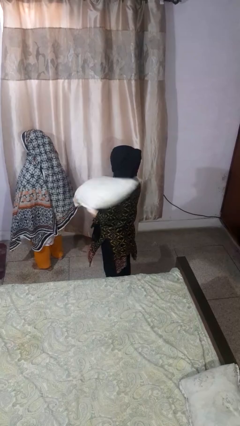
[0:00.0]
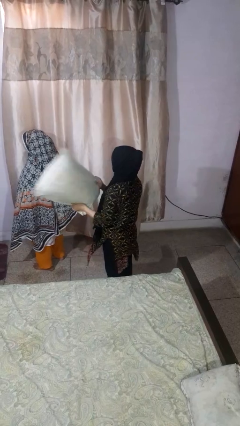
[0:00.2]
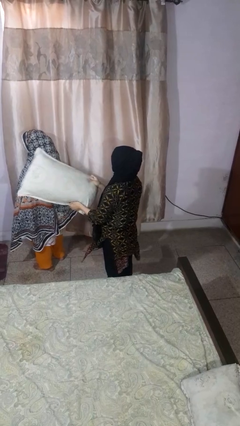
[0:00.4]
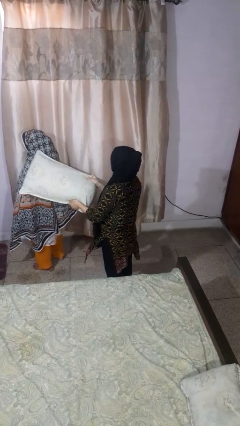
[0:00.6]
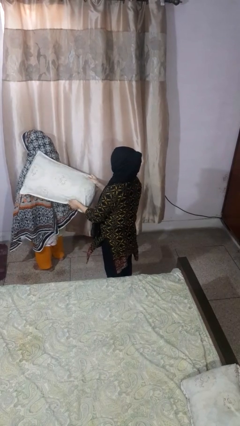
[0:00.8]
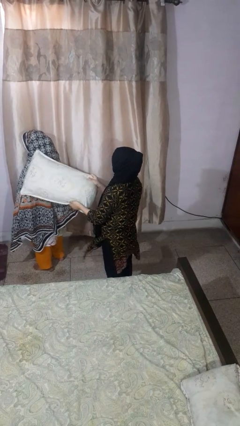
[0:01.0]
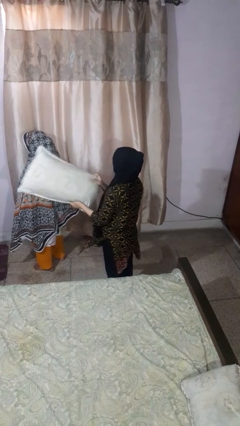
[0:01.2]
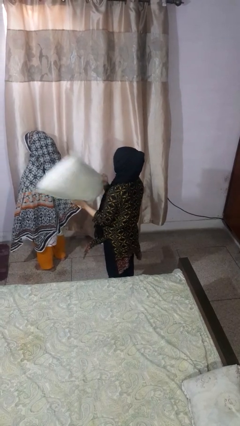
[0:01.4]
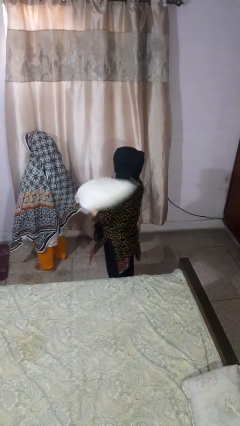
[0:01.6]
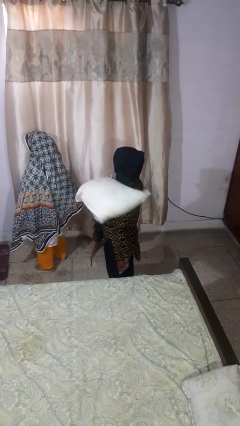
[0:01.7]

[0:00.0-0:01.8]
person hits person with pillow

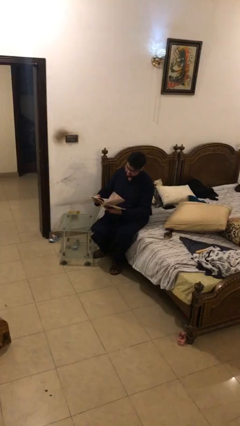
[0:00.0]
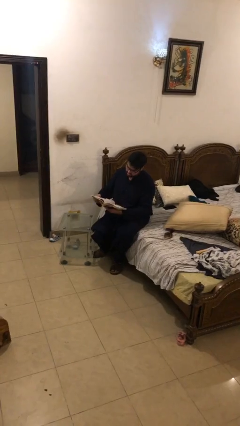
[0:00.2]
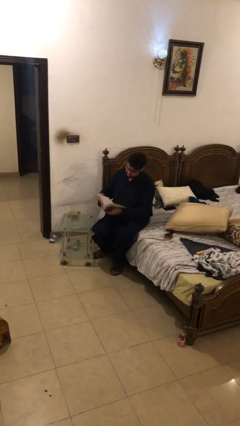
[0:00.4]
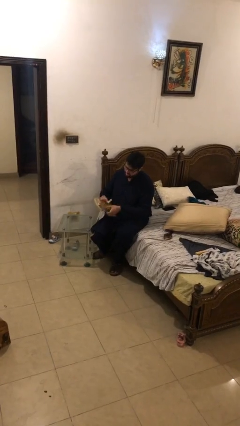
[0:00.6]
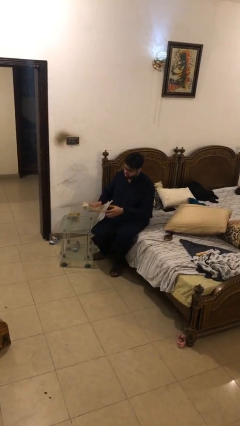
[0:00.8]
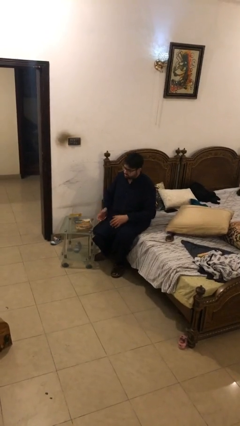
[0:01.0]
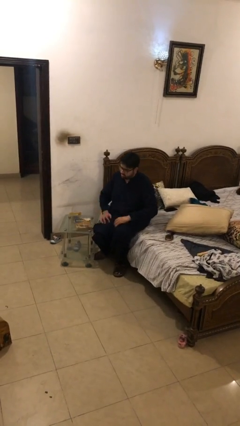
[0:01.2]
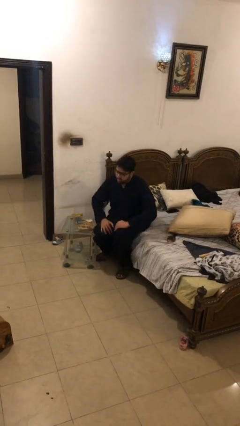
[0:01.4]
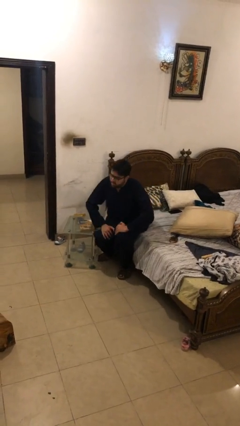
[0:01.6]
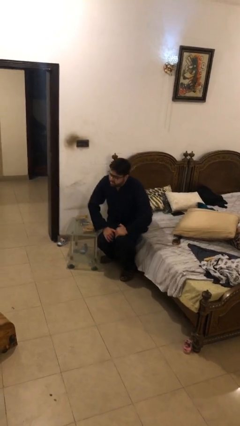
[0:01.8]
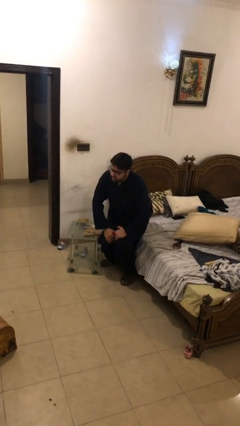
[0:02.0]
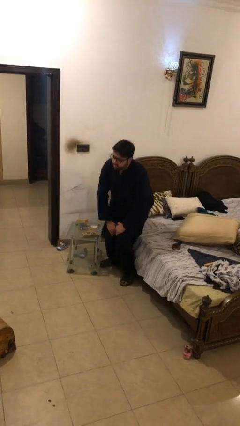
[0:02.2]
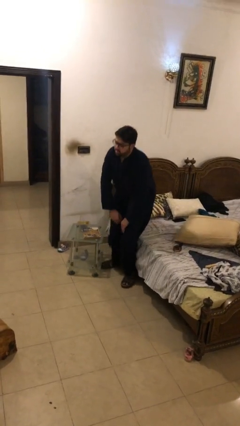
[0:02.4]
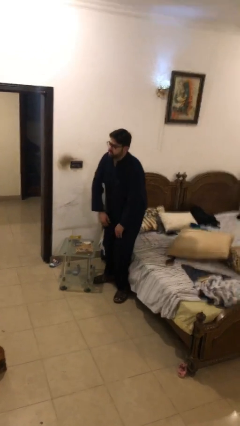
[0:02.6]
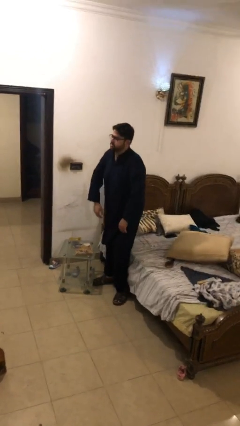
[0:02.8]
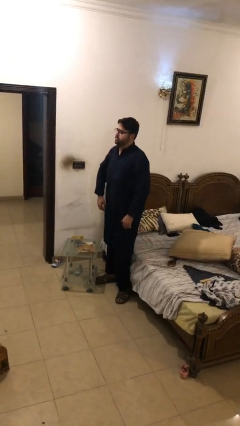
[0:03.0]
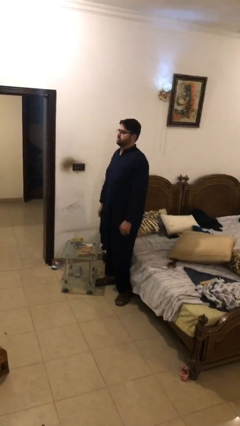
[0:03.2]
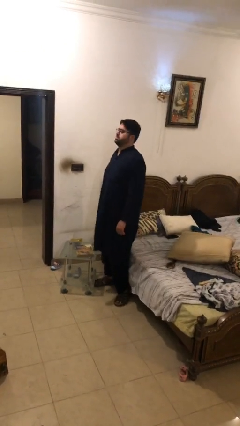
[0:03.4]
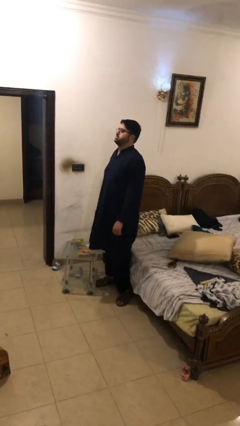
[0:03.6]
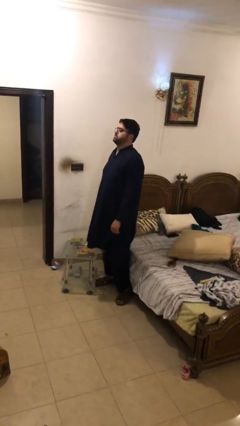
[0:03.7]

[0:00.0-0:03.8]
person stands up

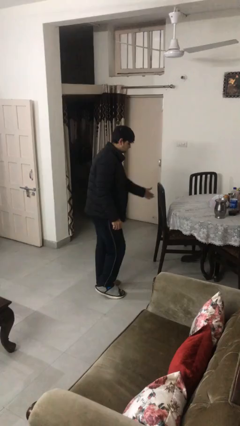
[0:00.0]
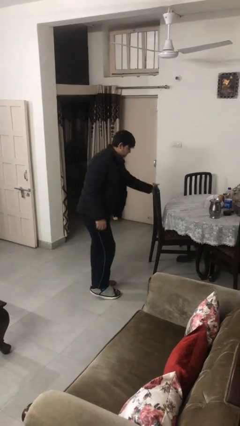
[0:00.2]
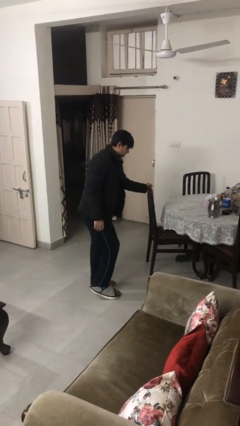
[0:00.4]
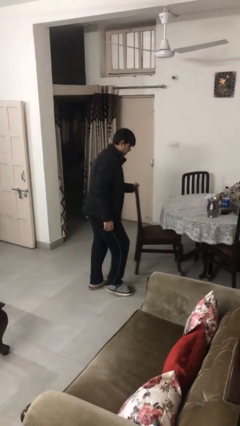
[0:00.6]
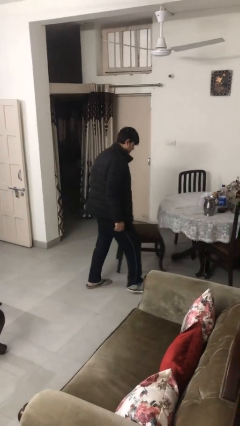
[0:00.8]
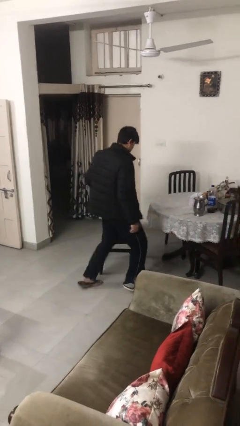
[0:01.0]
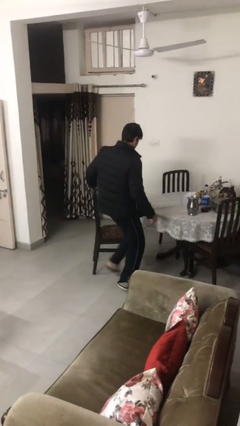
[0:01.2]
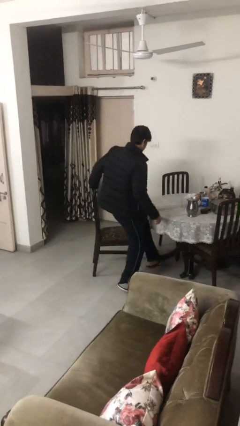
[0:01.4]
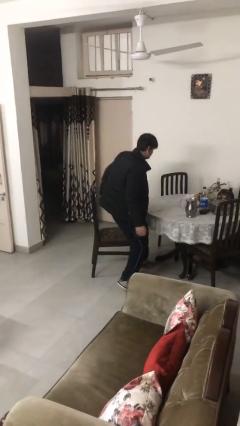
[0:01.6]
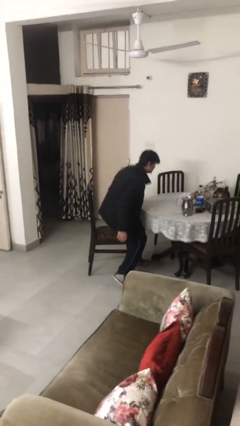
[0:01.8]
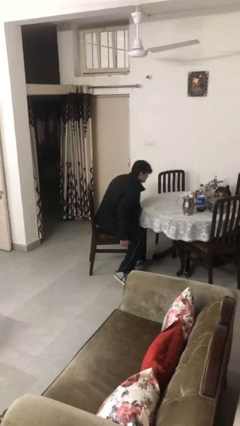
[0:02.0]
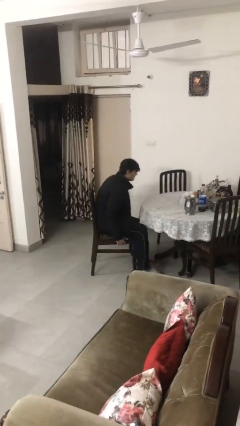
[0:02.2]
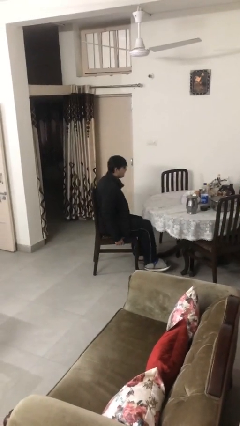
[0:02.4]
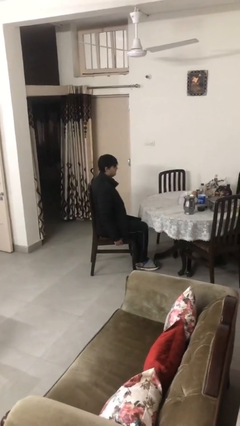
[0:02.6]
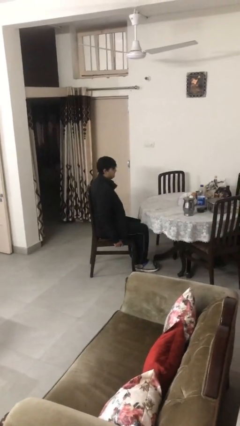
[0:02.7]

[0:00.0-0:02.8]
person sits down

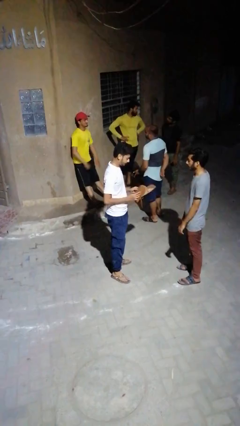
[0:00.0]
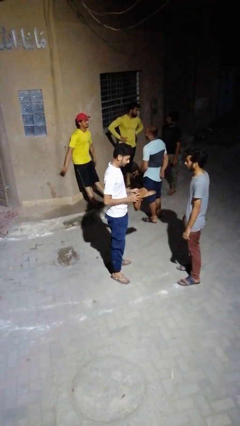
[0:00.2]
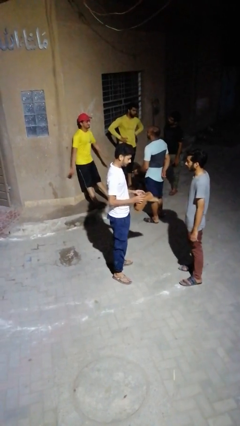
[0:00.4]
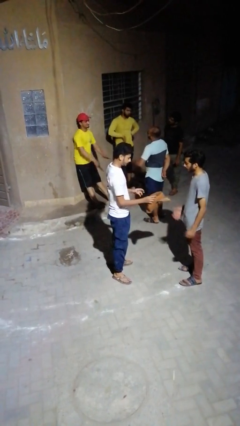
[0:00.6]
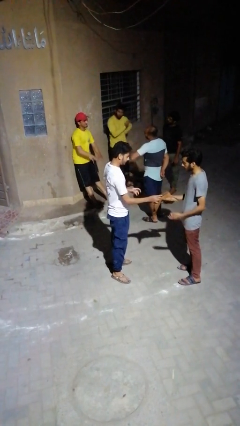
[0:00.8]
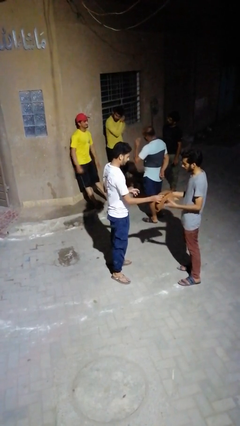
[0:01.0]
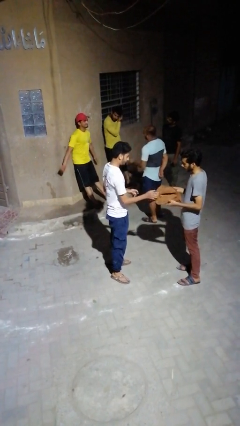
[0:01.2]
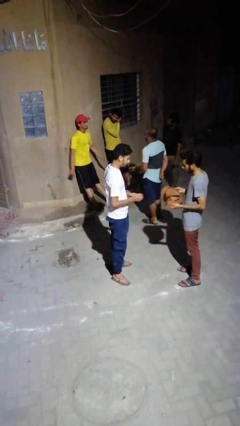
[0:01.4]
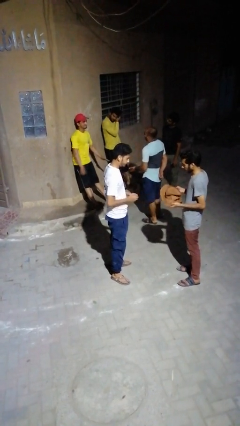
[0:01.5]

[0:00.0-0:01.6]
person transfers object to person

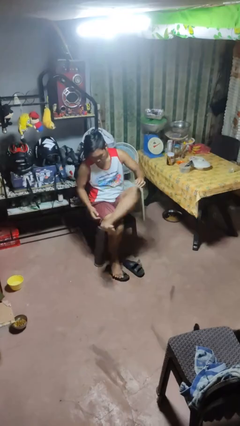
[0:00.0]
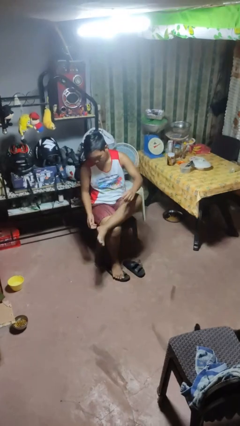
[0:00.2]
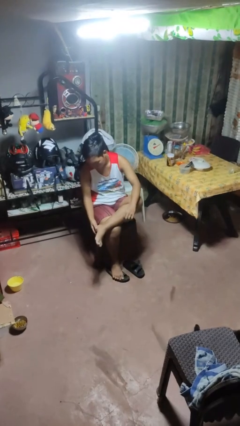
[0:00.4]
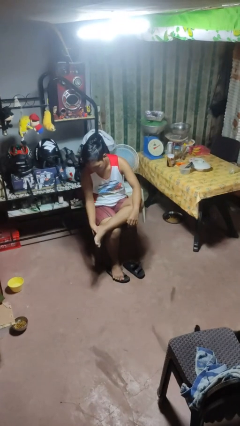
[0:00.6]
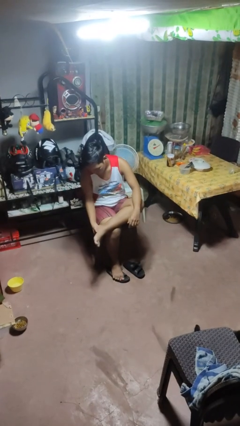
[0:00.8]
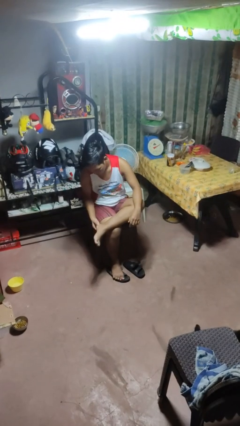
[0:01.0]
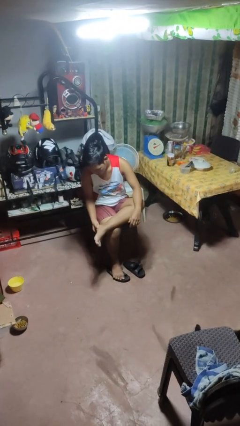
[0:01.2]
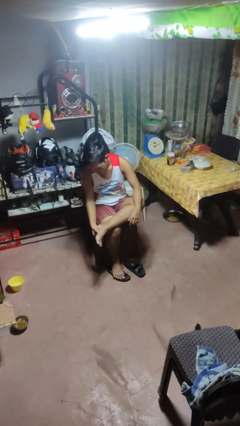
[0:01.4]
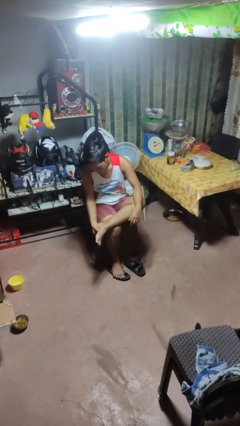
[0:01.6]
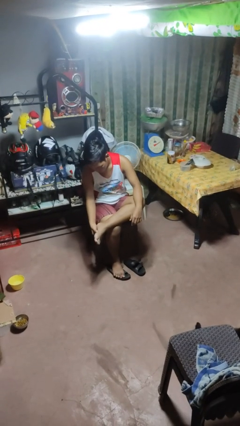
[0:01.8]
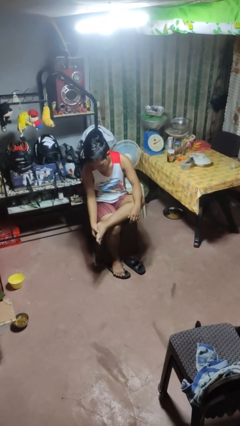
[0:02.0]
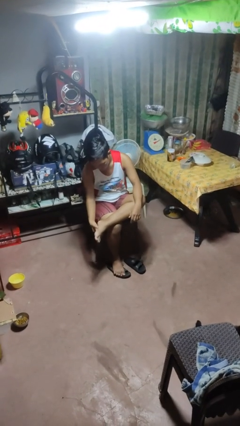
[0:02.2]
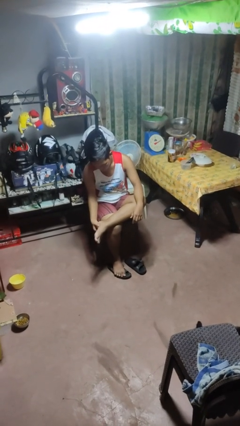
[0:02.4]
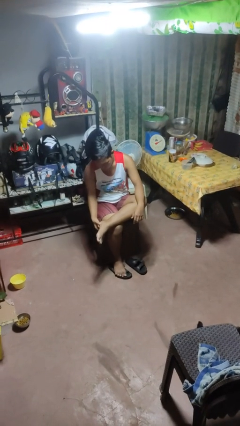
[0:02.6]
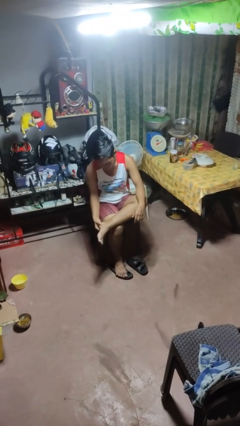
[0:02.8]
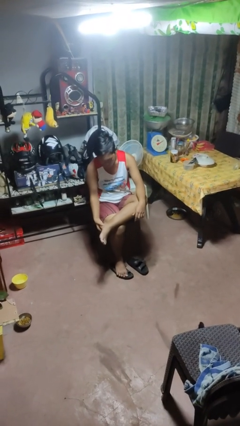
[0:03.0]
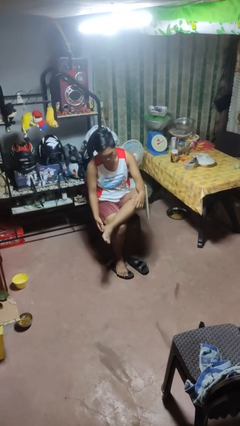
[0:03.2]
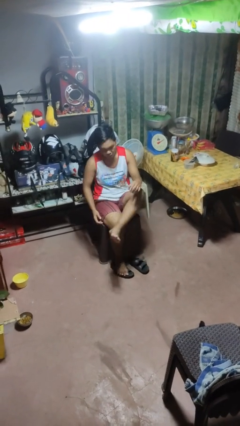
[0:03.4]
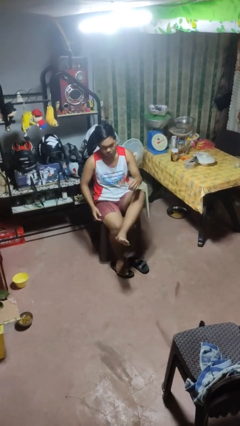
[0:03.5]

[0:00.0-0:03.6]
person rubs foot

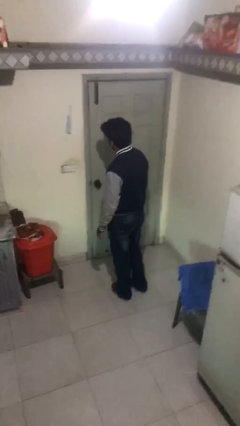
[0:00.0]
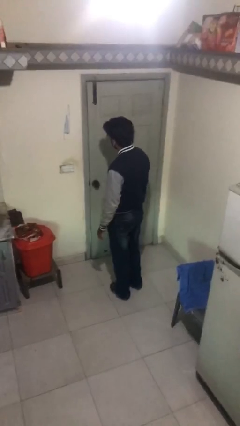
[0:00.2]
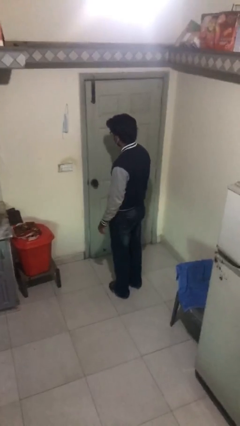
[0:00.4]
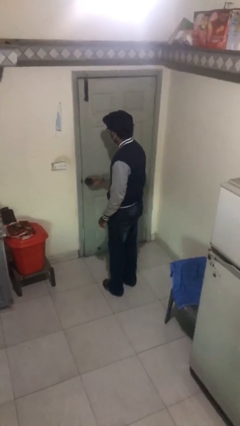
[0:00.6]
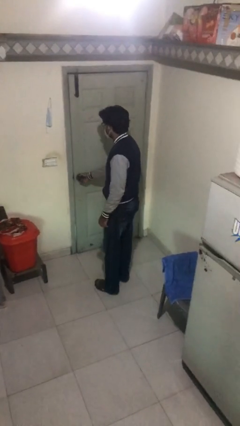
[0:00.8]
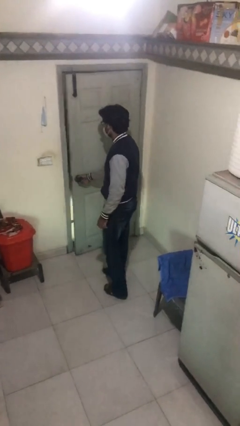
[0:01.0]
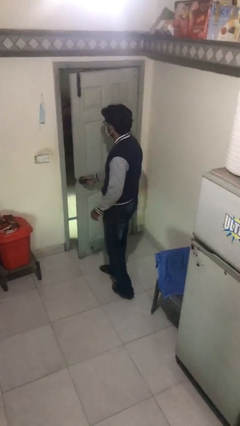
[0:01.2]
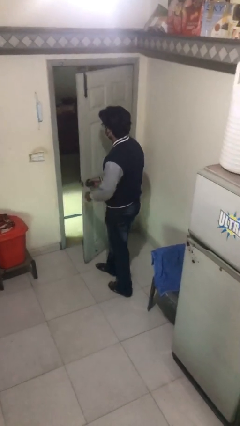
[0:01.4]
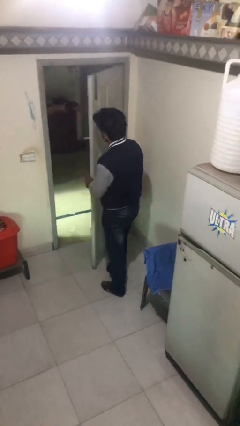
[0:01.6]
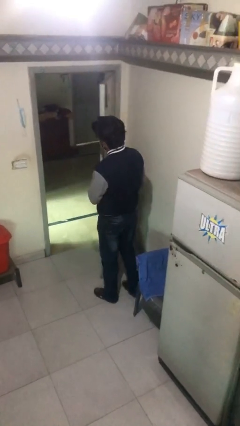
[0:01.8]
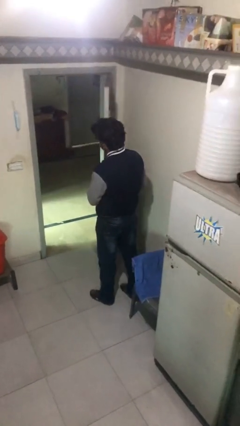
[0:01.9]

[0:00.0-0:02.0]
person opens facility door

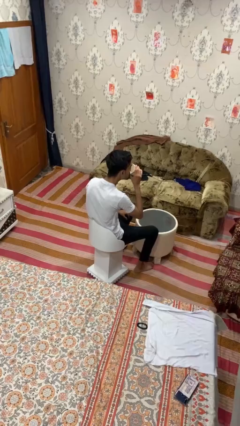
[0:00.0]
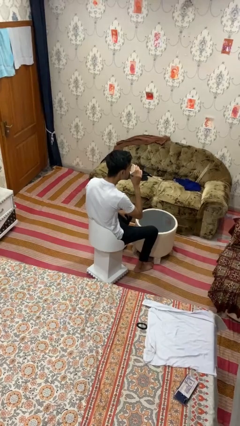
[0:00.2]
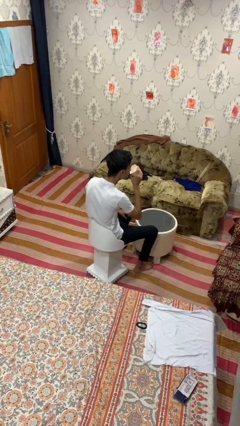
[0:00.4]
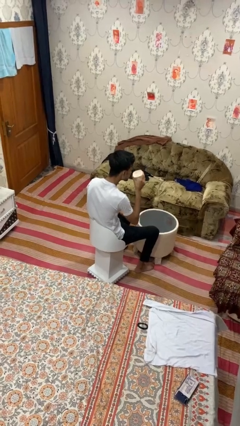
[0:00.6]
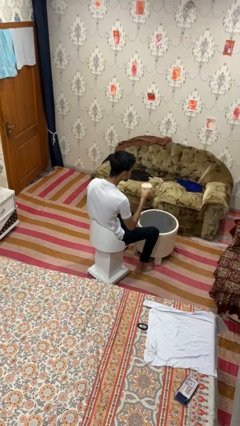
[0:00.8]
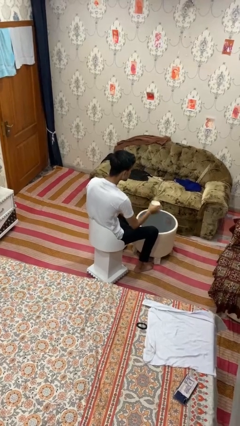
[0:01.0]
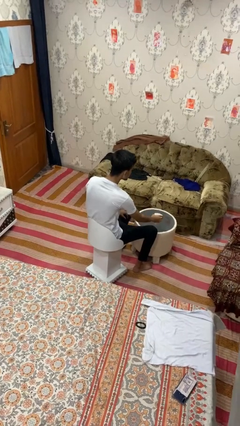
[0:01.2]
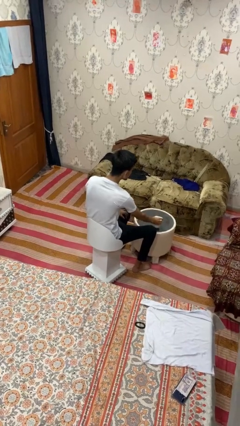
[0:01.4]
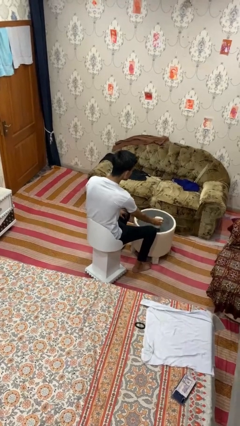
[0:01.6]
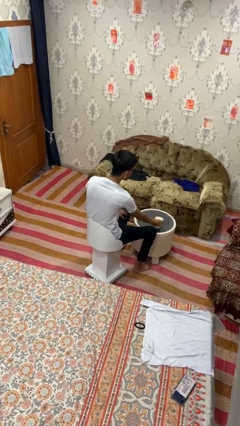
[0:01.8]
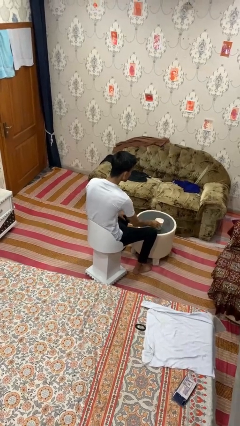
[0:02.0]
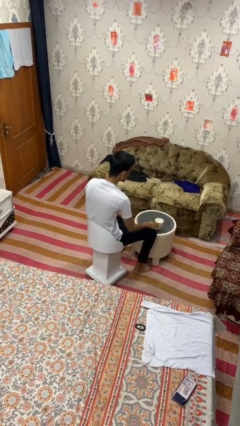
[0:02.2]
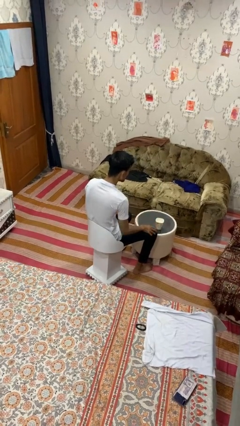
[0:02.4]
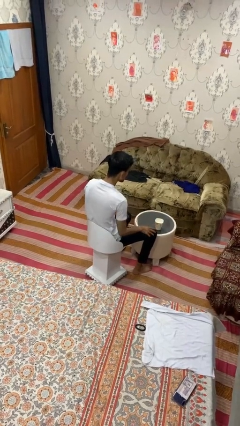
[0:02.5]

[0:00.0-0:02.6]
person puts down object on table
